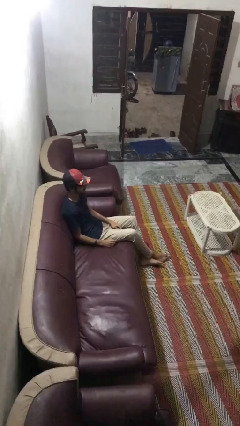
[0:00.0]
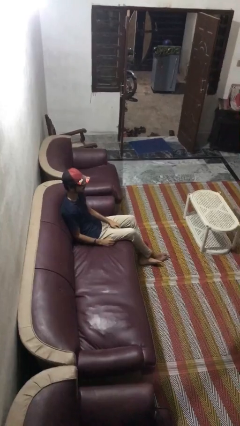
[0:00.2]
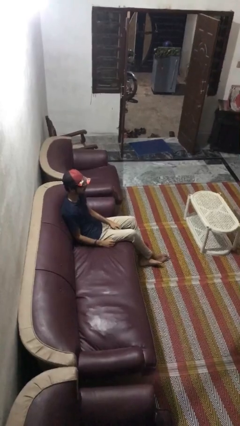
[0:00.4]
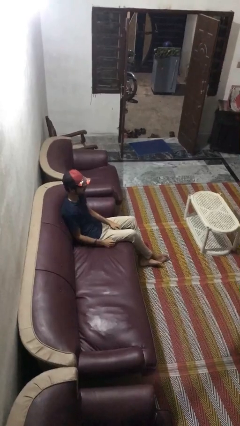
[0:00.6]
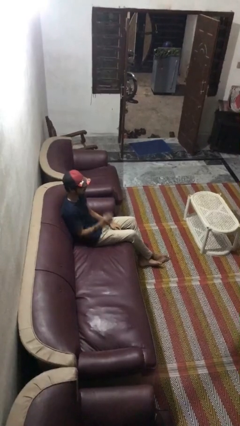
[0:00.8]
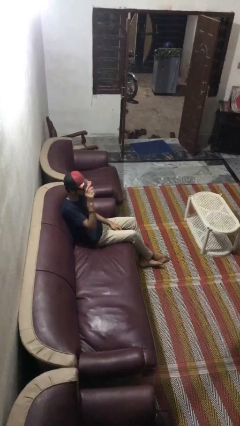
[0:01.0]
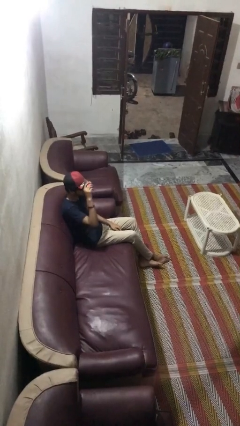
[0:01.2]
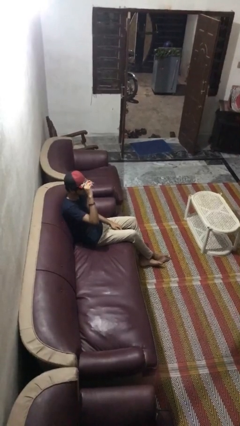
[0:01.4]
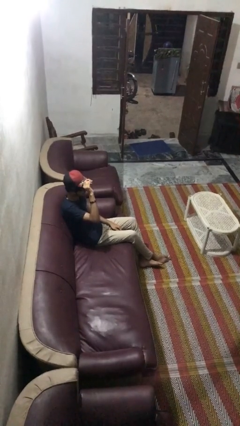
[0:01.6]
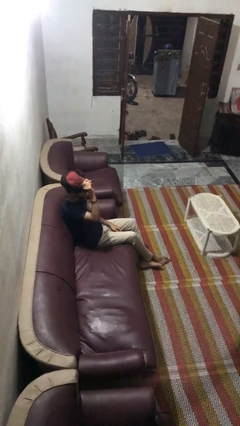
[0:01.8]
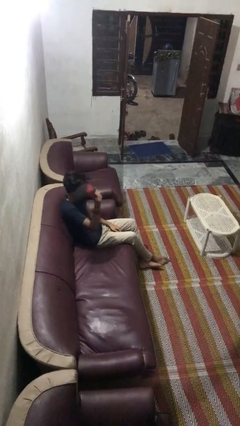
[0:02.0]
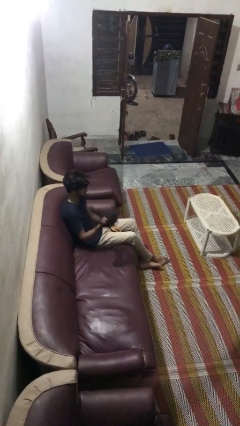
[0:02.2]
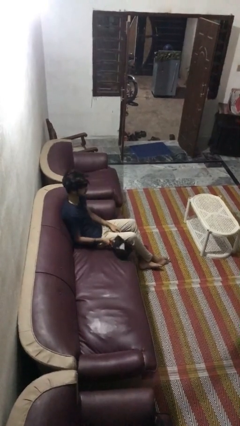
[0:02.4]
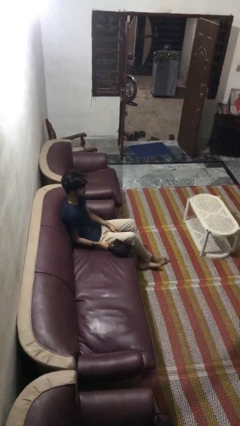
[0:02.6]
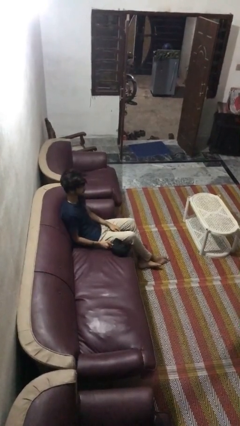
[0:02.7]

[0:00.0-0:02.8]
person takes off hat

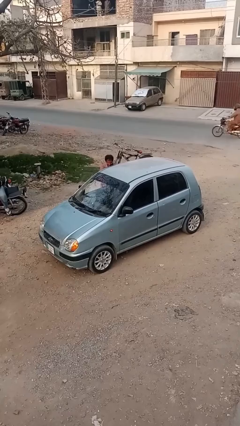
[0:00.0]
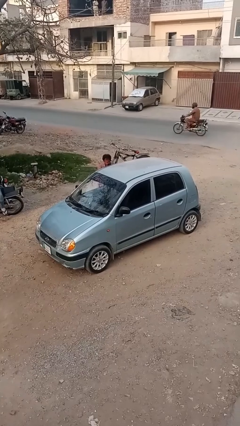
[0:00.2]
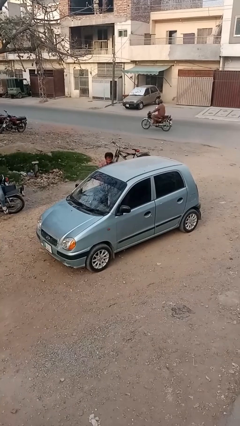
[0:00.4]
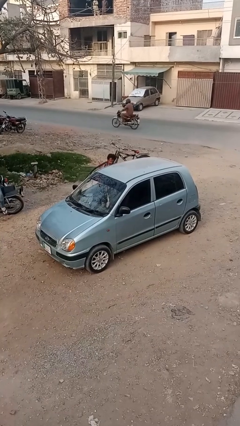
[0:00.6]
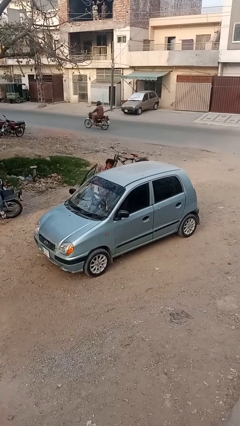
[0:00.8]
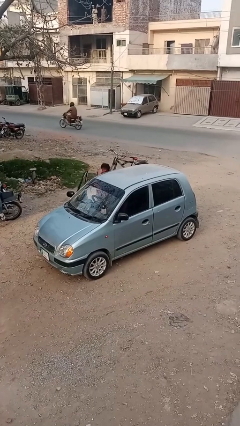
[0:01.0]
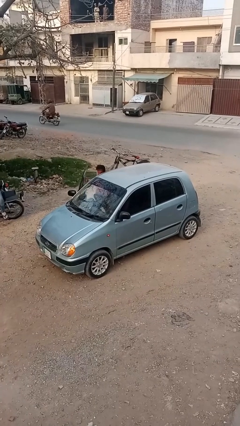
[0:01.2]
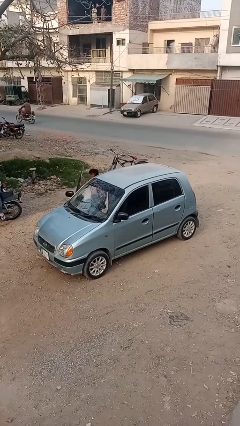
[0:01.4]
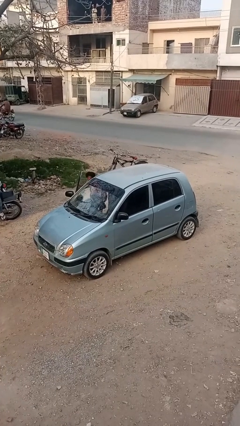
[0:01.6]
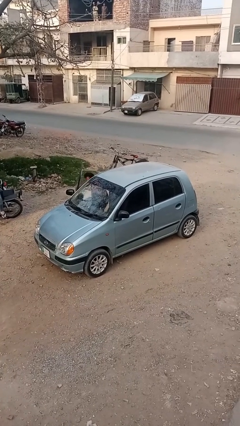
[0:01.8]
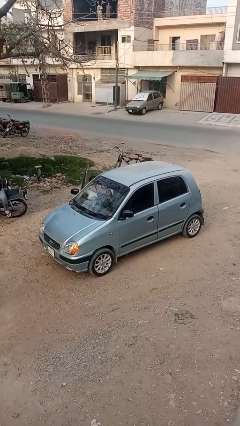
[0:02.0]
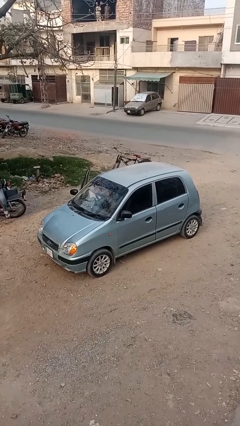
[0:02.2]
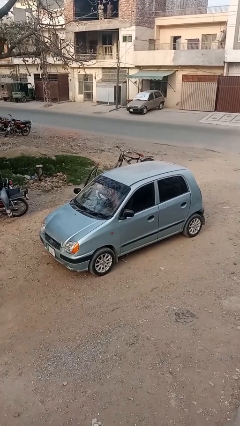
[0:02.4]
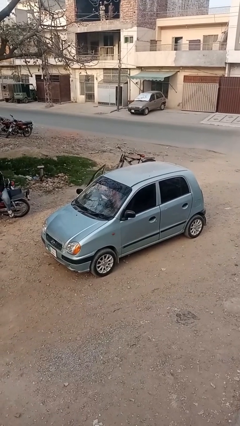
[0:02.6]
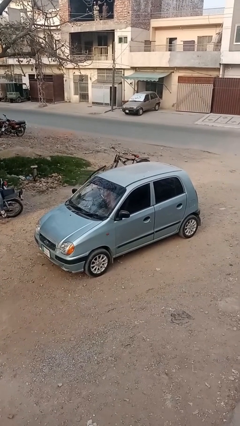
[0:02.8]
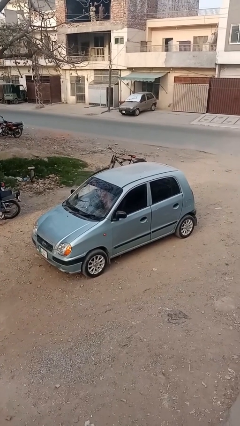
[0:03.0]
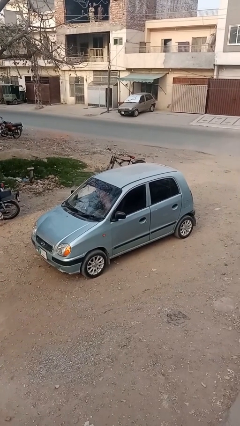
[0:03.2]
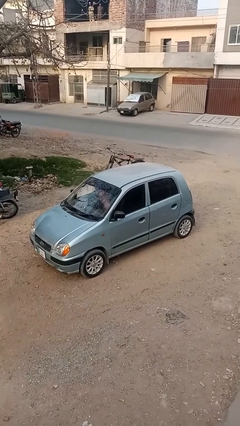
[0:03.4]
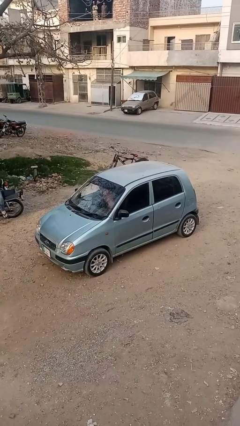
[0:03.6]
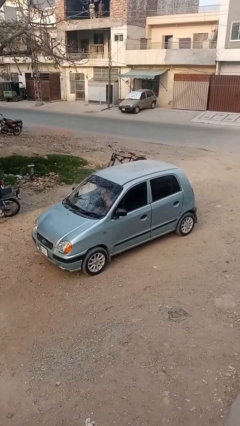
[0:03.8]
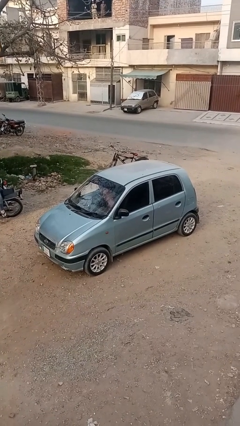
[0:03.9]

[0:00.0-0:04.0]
car picks up person

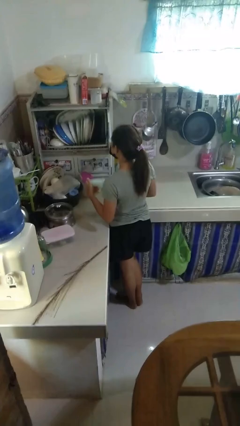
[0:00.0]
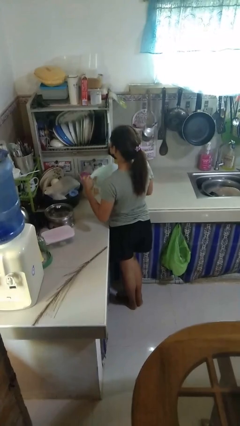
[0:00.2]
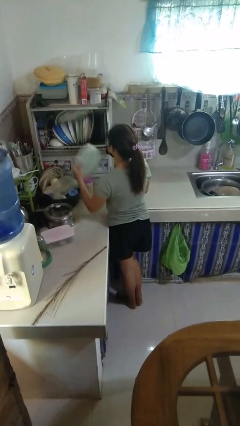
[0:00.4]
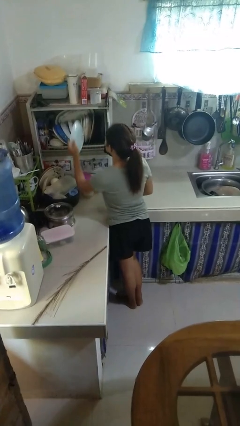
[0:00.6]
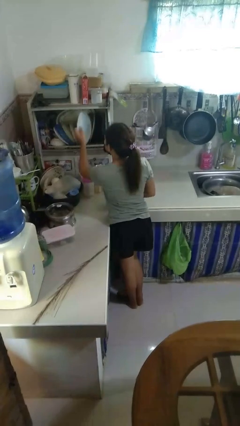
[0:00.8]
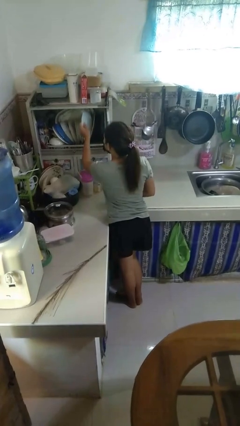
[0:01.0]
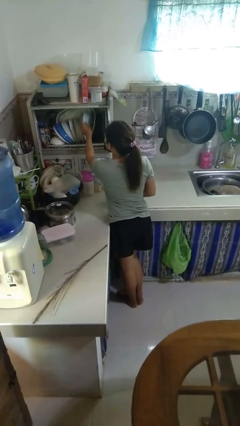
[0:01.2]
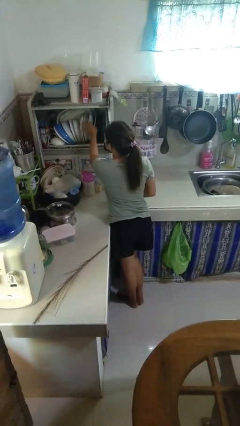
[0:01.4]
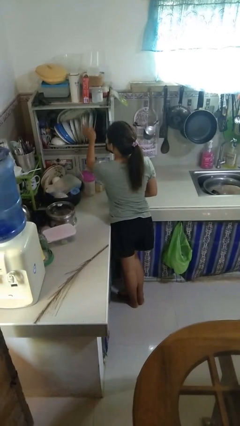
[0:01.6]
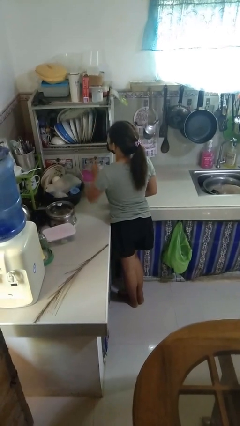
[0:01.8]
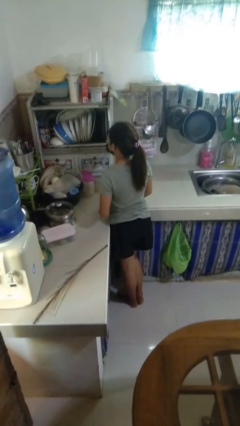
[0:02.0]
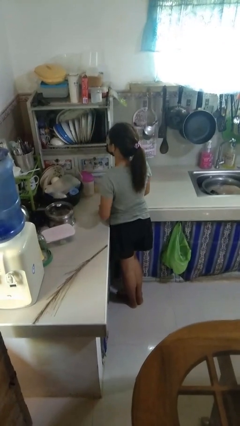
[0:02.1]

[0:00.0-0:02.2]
person puts object into kitchen drawer

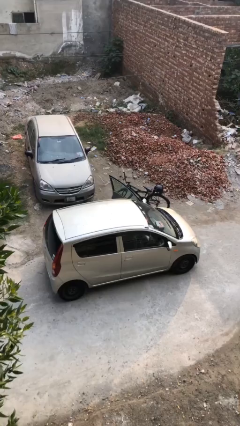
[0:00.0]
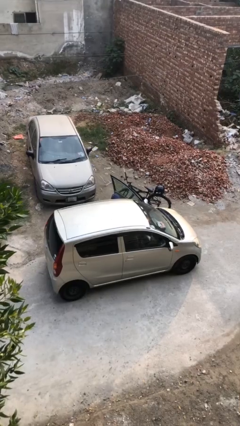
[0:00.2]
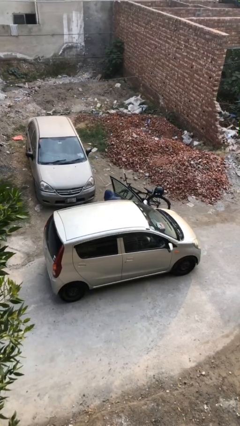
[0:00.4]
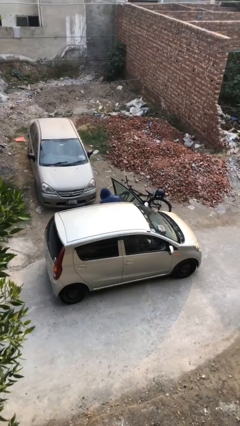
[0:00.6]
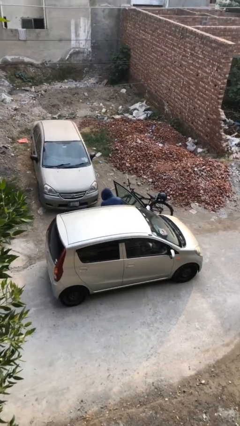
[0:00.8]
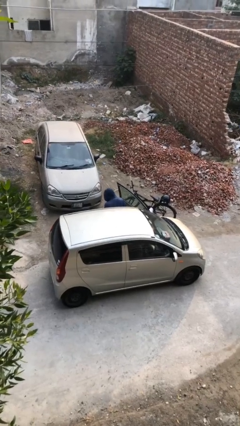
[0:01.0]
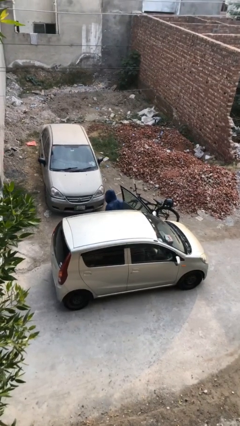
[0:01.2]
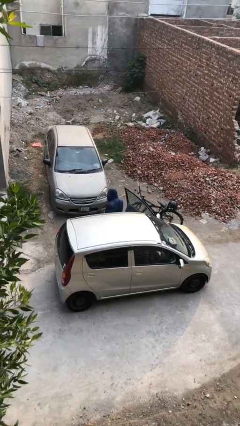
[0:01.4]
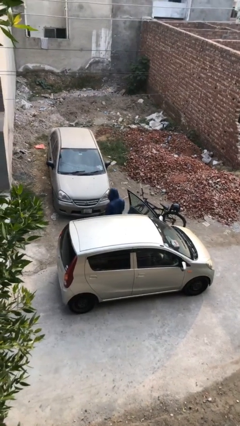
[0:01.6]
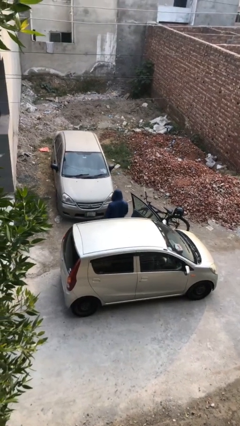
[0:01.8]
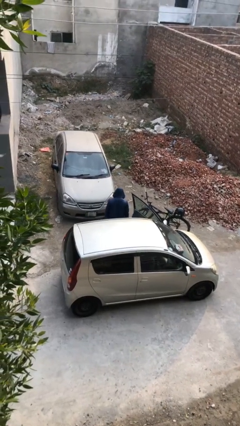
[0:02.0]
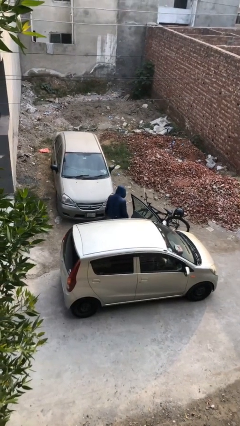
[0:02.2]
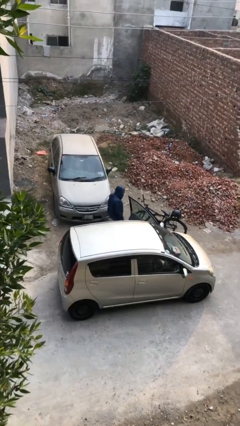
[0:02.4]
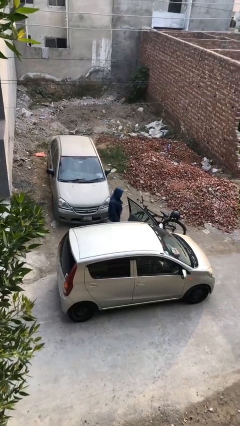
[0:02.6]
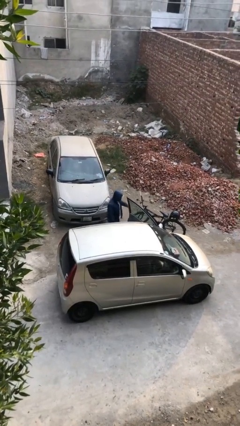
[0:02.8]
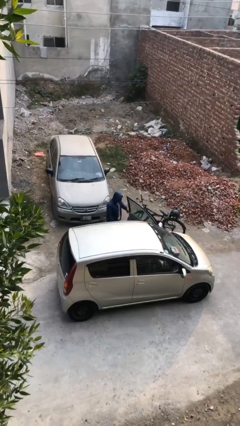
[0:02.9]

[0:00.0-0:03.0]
person exits car

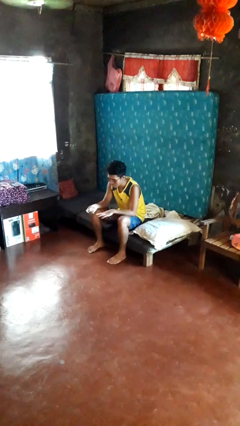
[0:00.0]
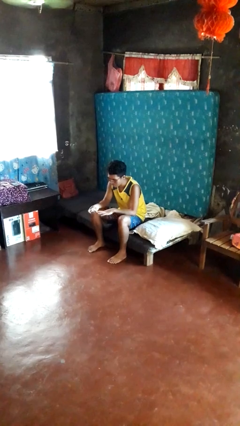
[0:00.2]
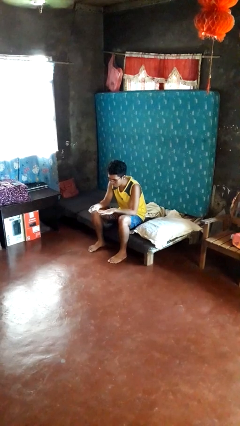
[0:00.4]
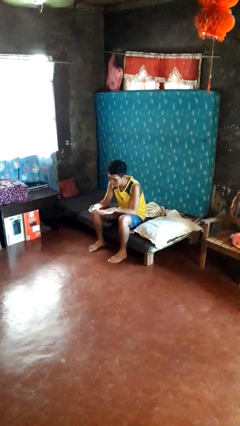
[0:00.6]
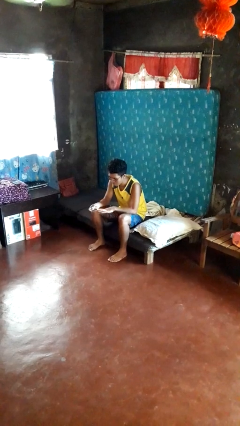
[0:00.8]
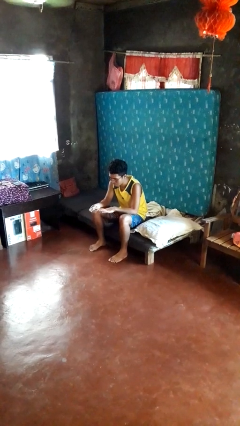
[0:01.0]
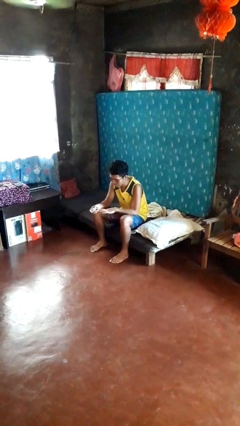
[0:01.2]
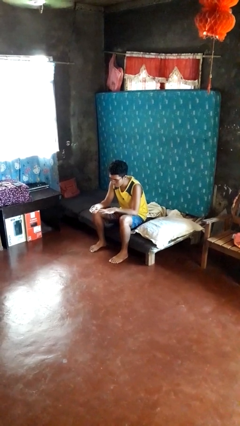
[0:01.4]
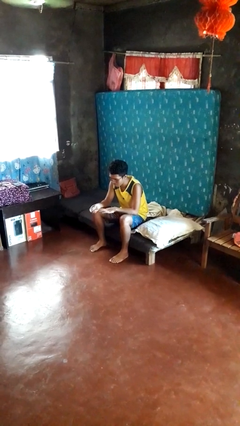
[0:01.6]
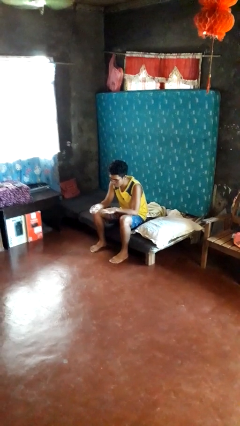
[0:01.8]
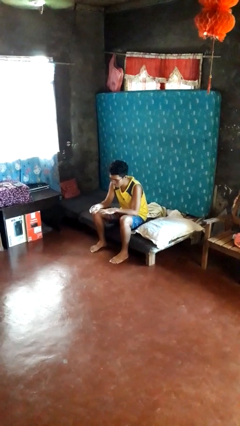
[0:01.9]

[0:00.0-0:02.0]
person clips fingernails

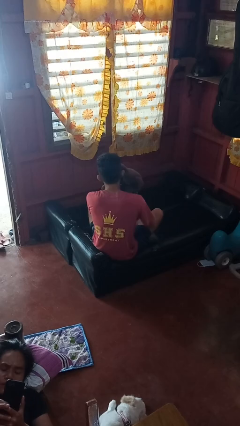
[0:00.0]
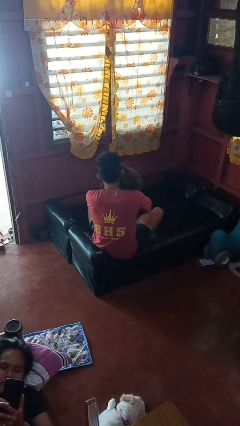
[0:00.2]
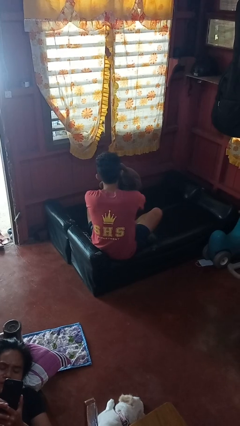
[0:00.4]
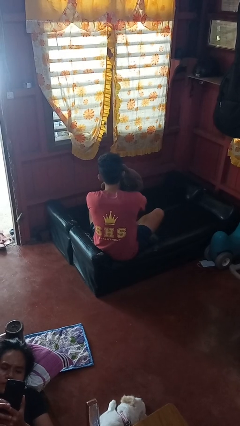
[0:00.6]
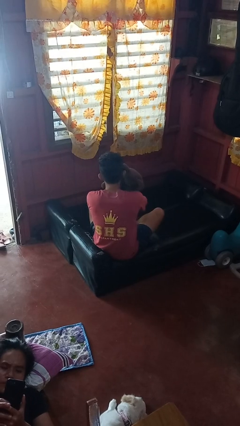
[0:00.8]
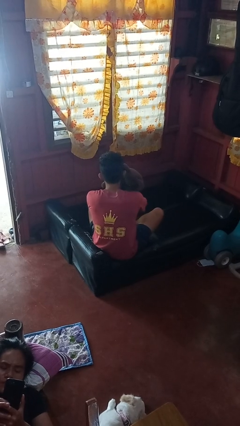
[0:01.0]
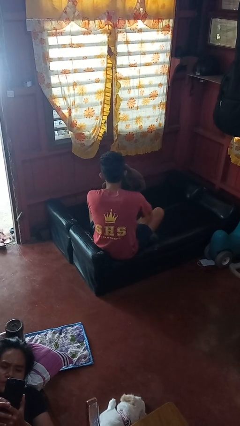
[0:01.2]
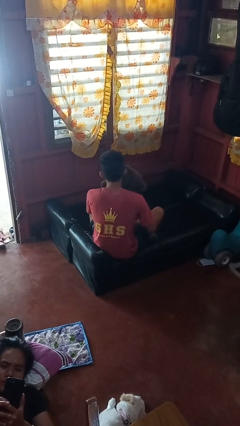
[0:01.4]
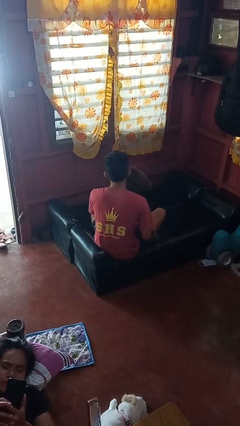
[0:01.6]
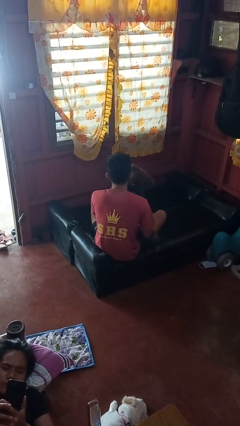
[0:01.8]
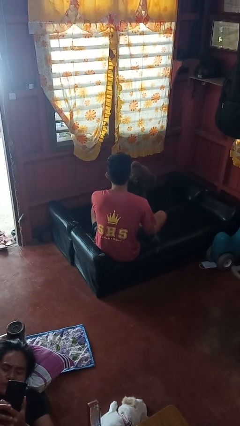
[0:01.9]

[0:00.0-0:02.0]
person hugs stuffed animal

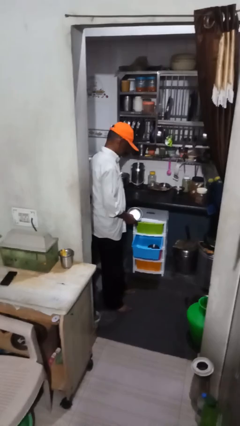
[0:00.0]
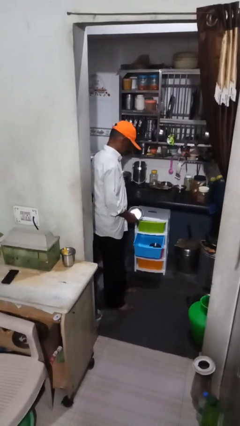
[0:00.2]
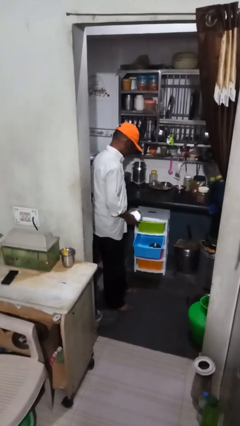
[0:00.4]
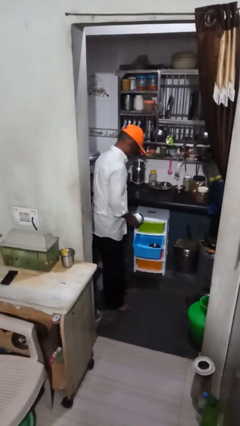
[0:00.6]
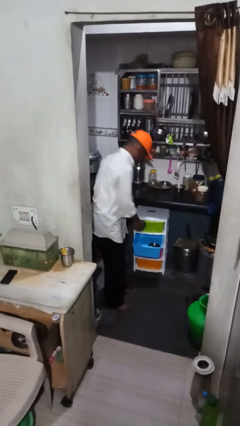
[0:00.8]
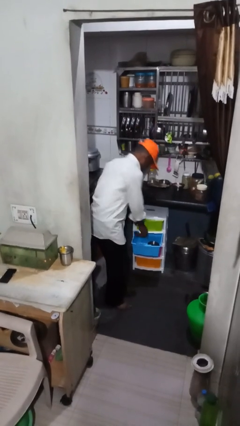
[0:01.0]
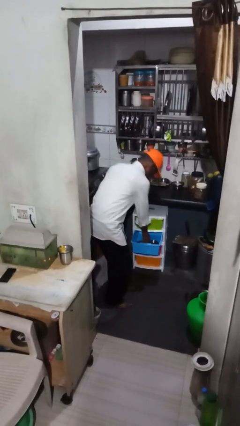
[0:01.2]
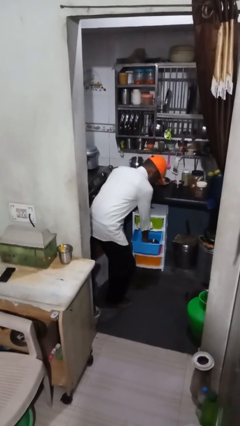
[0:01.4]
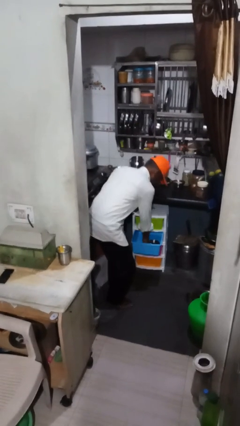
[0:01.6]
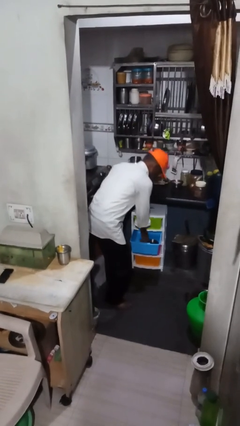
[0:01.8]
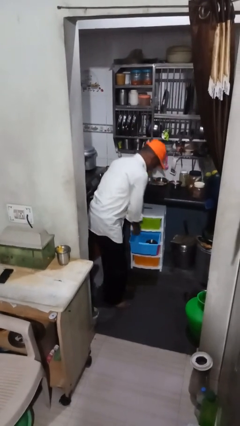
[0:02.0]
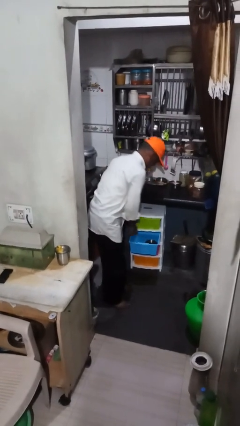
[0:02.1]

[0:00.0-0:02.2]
person puts object in cabinet
